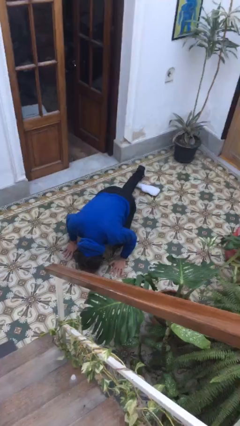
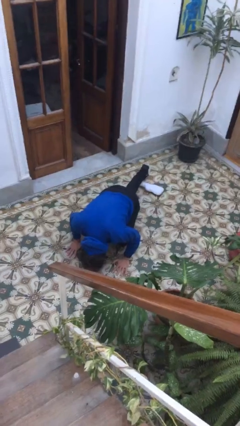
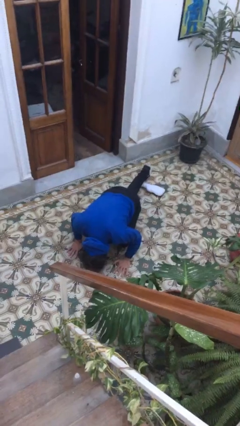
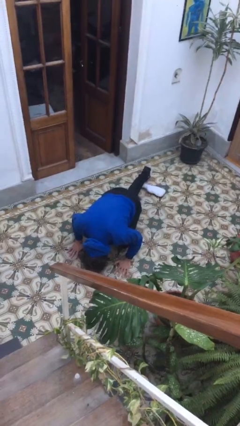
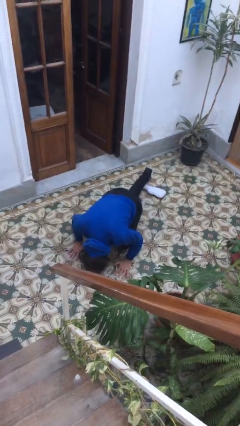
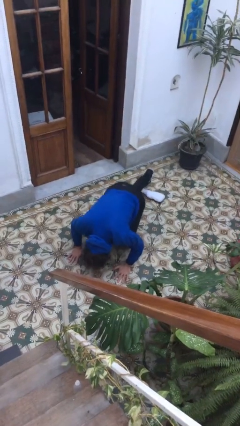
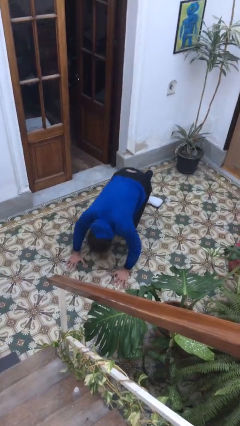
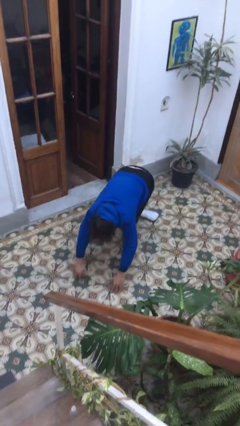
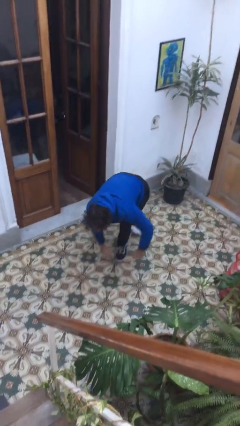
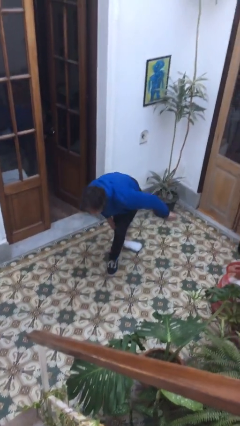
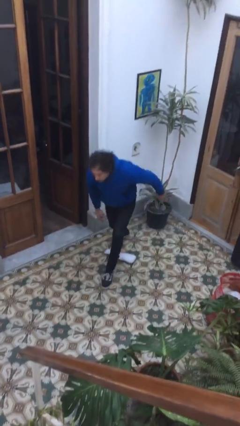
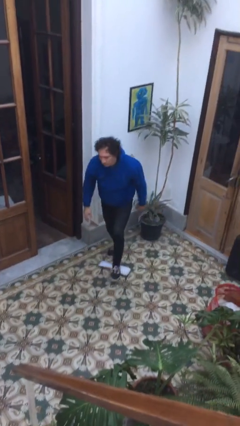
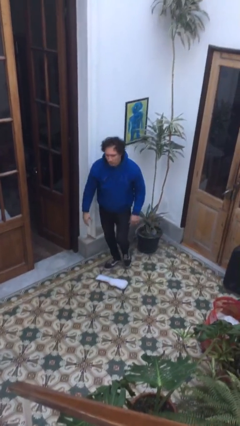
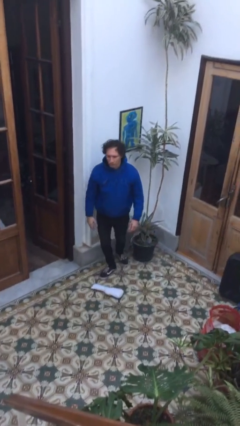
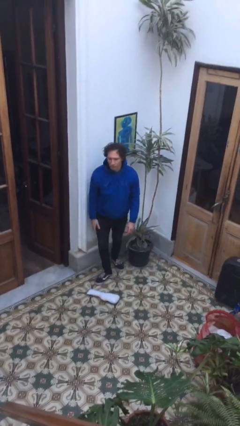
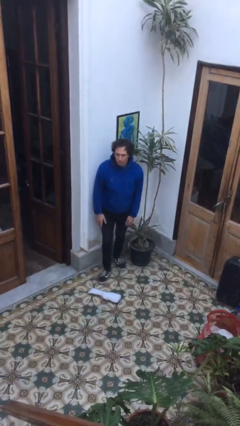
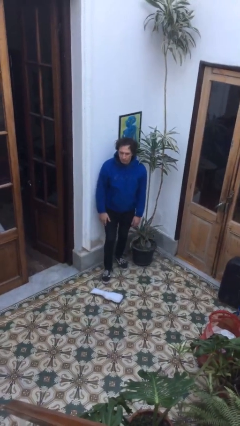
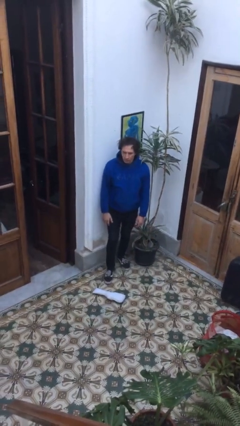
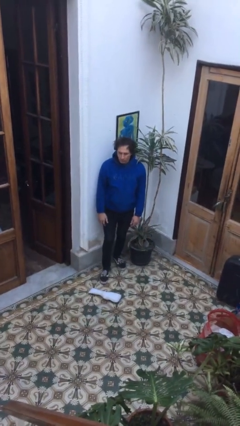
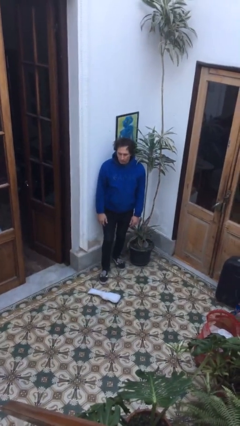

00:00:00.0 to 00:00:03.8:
person stands up from floor

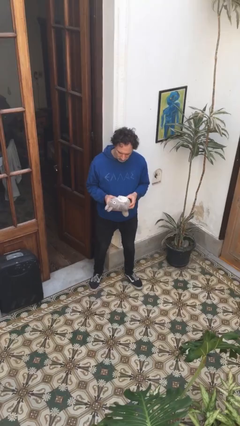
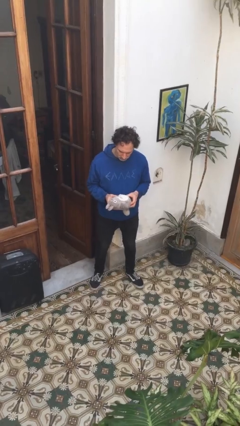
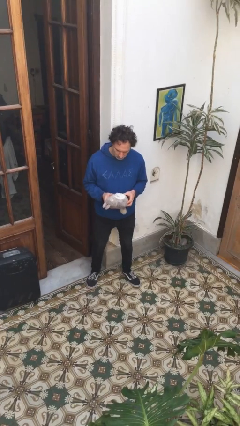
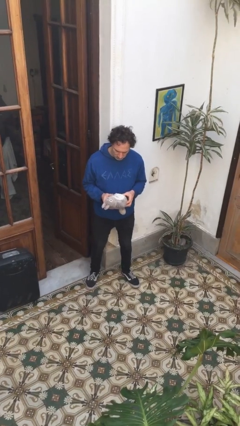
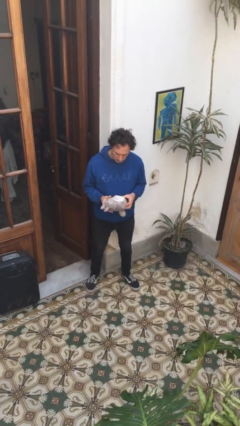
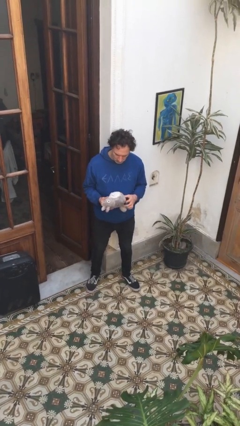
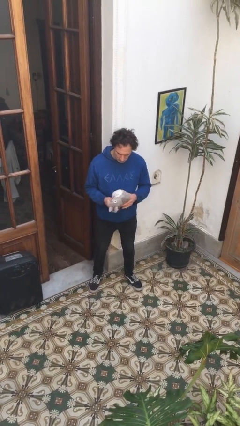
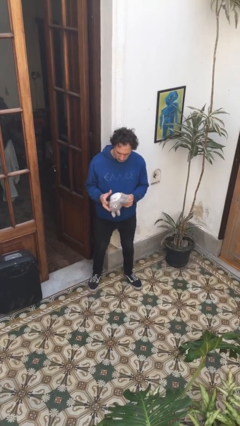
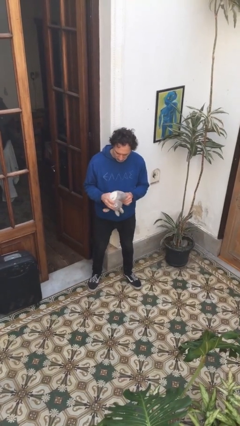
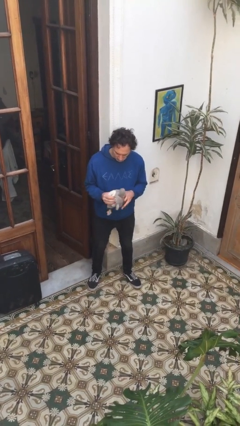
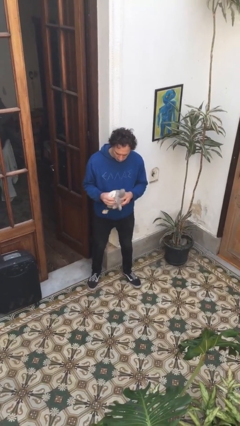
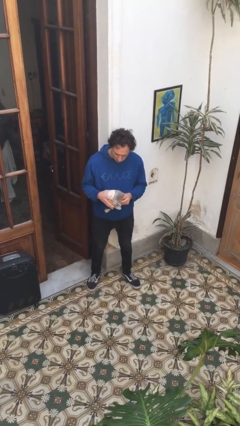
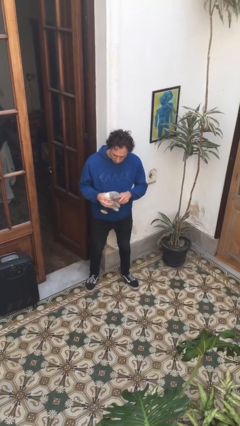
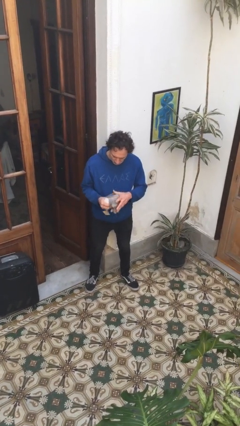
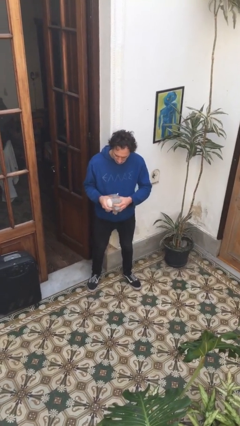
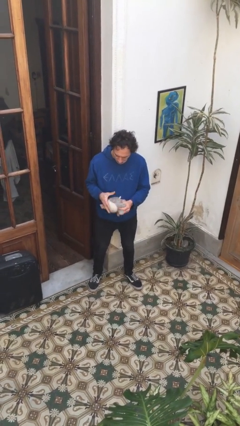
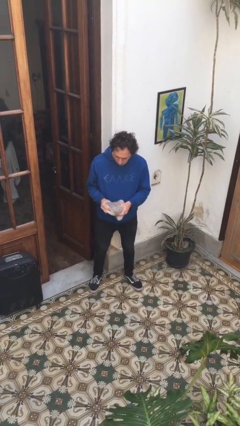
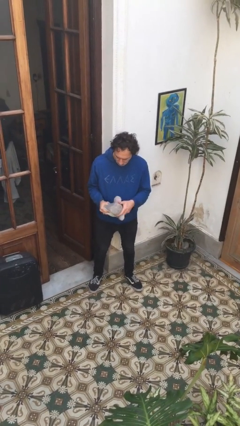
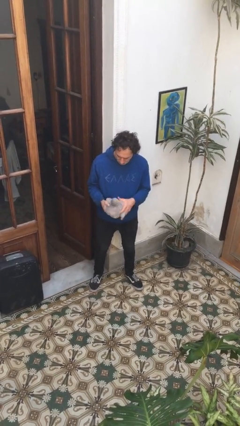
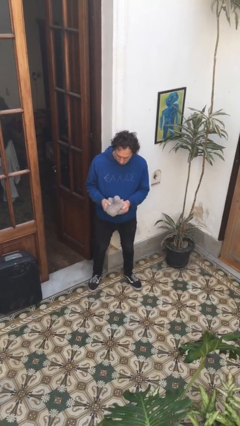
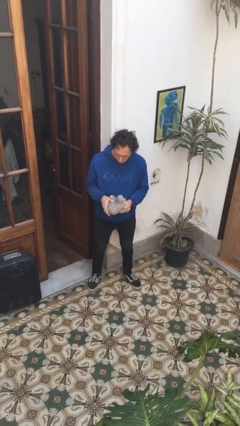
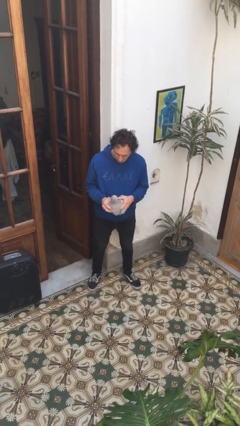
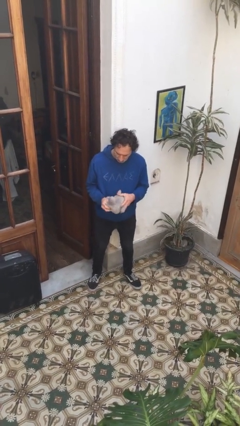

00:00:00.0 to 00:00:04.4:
person squeezes object

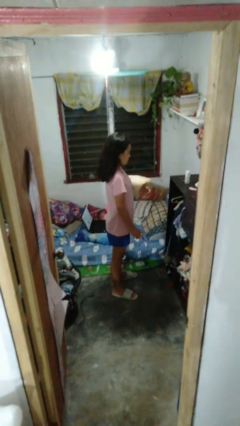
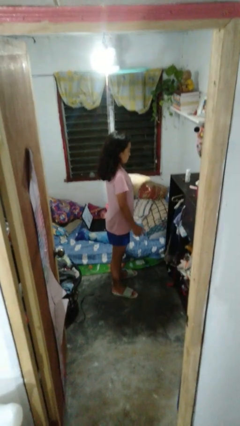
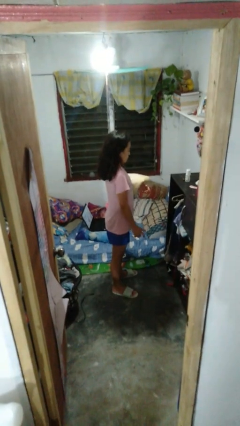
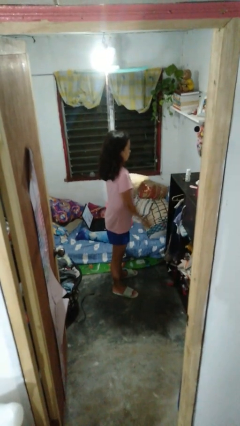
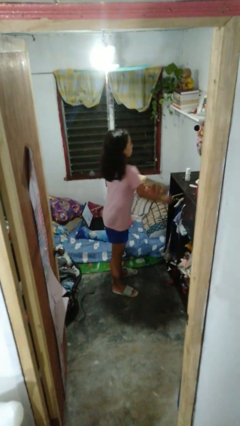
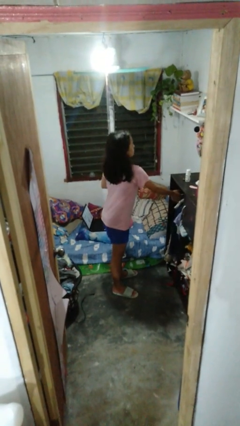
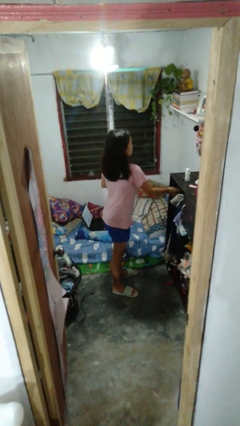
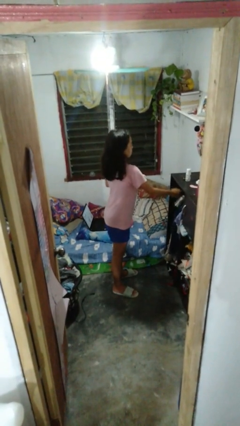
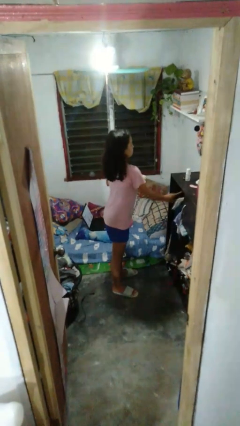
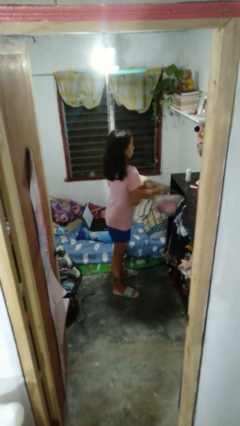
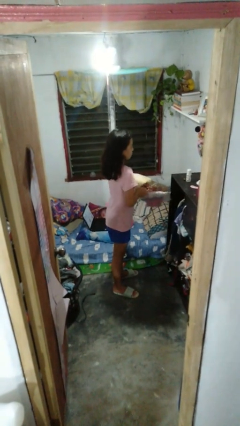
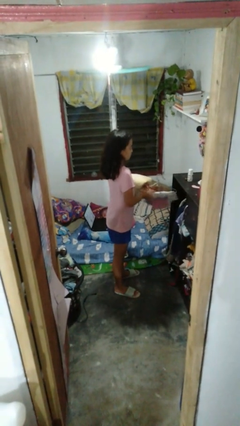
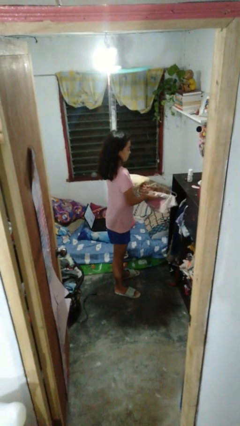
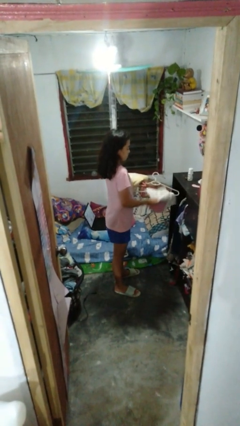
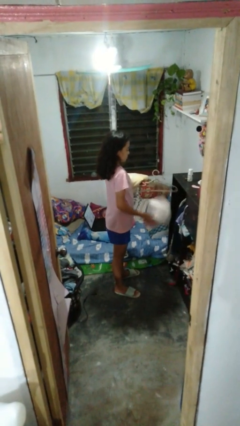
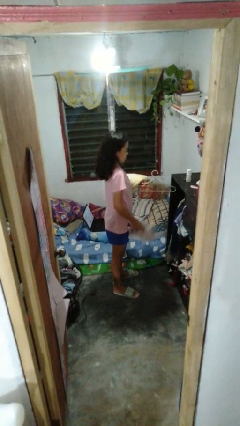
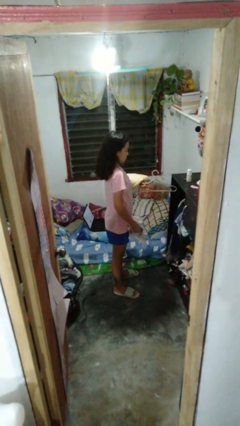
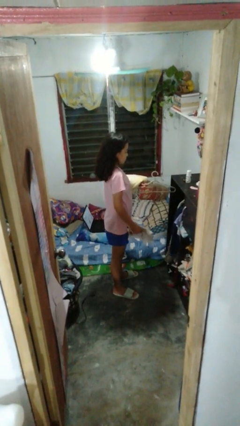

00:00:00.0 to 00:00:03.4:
person takes clothes from closet

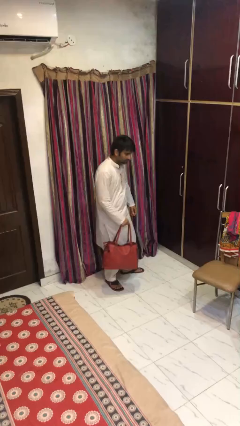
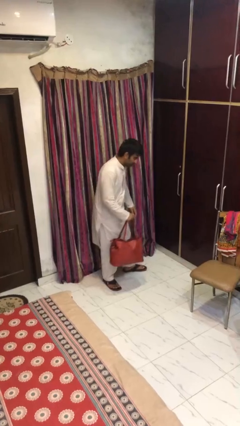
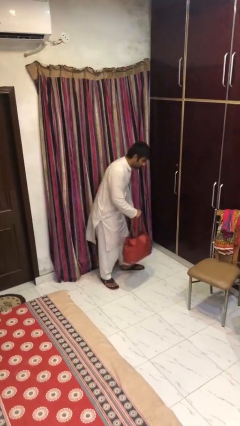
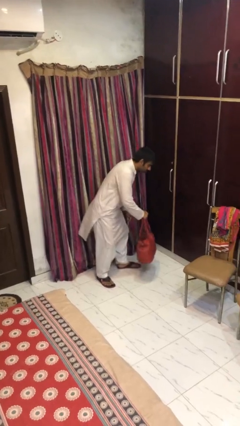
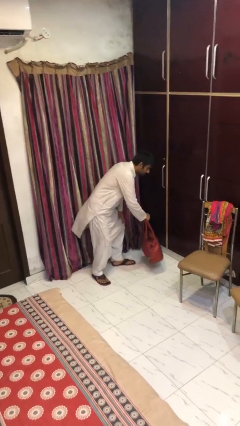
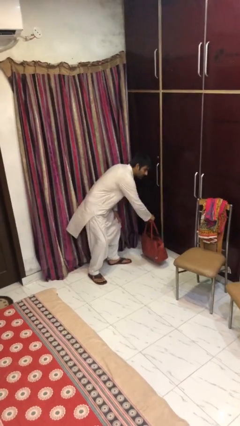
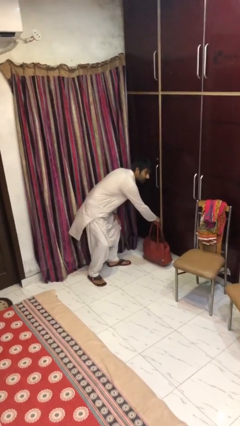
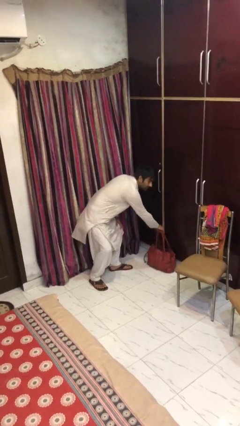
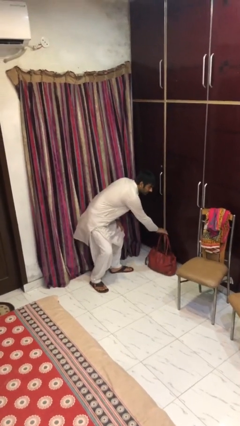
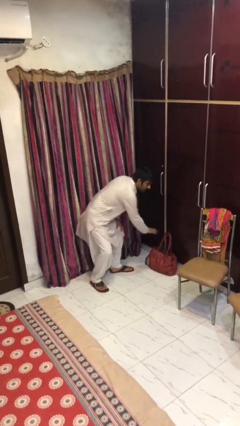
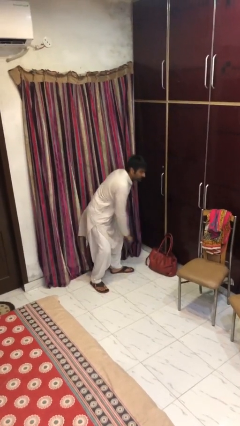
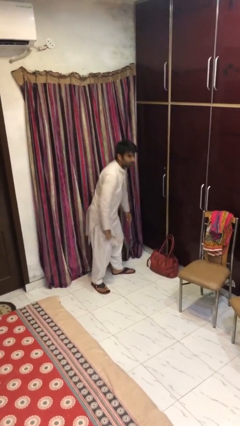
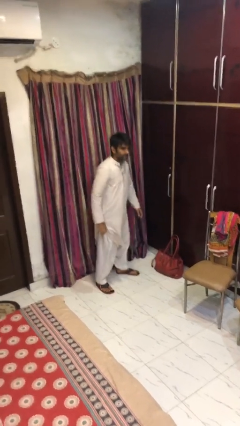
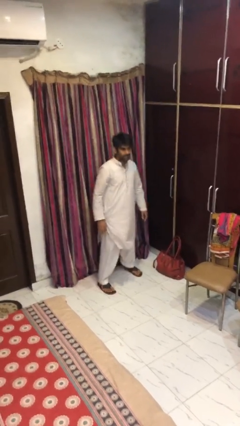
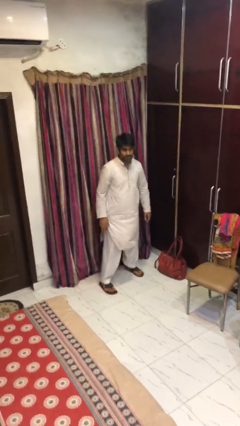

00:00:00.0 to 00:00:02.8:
person puts down object on floor

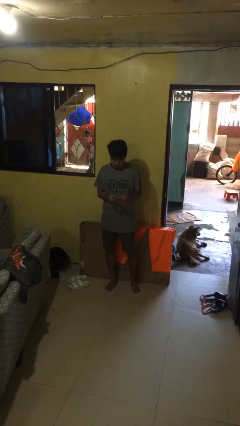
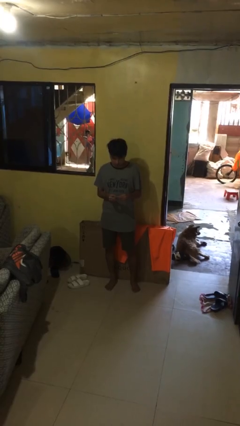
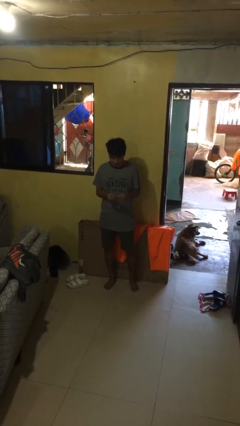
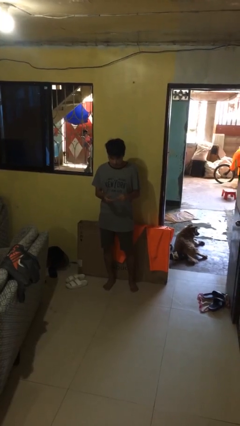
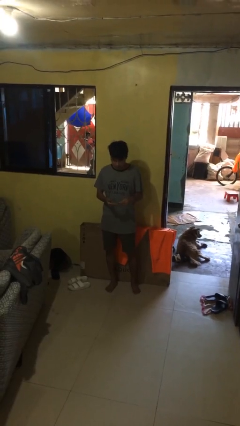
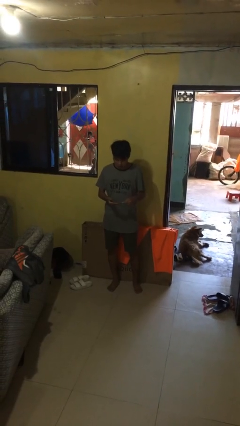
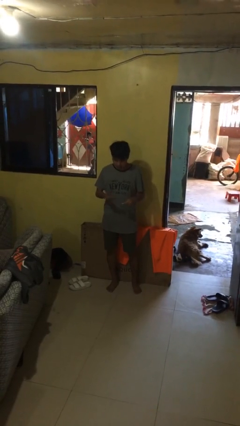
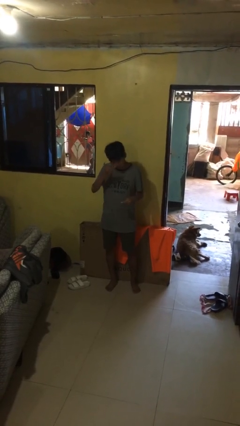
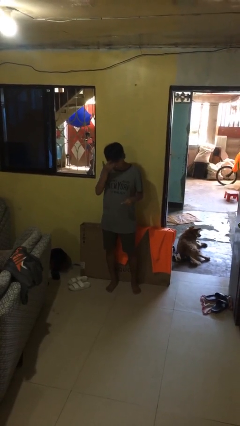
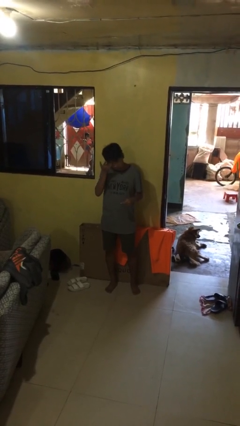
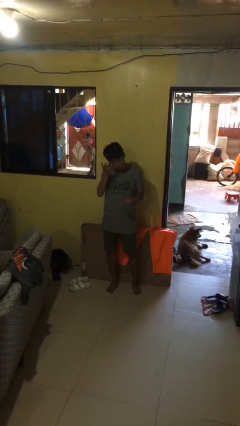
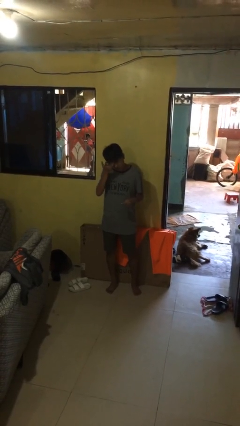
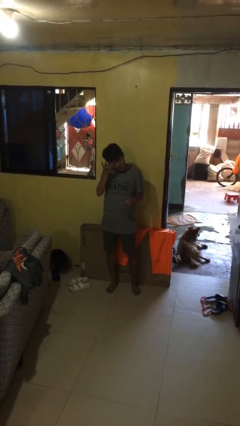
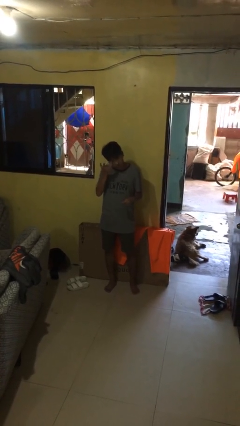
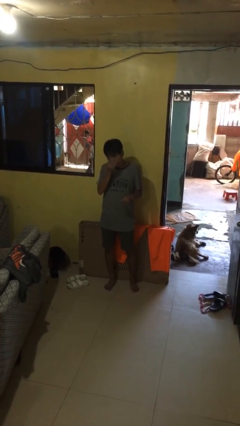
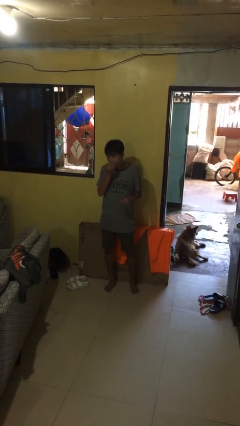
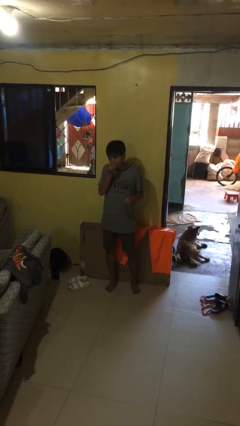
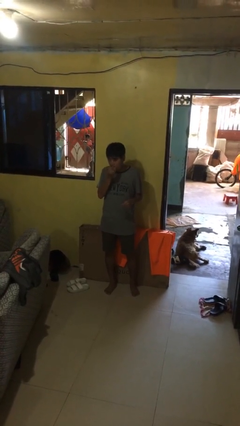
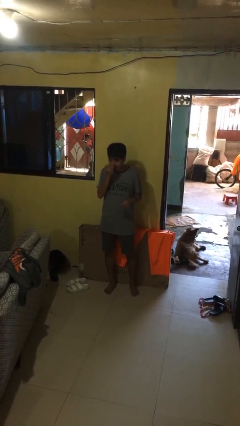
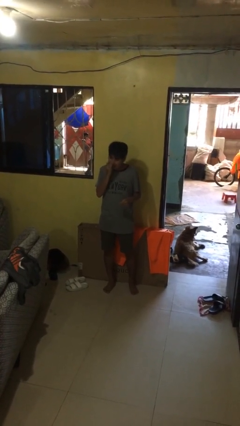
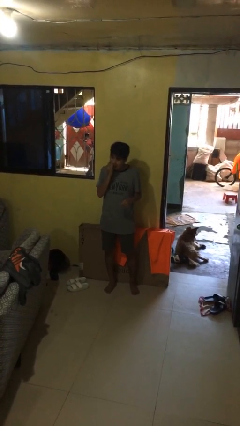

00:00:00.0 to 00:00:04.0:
person applies facial moisturizer
